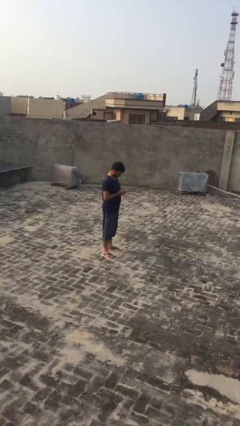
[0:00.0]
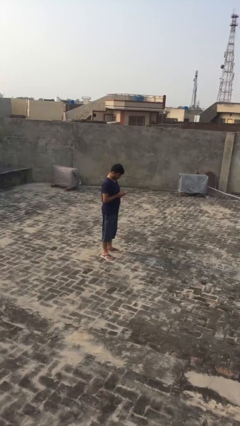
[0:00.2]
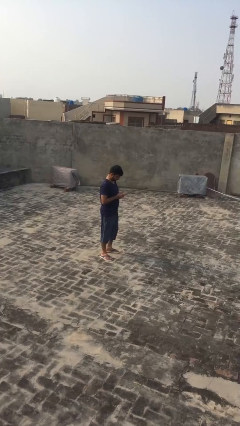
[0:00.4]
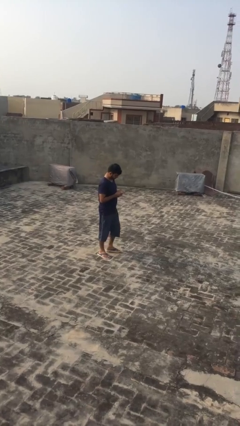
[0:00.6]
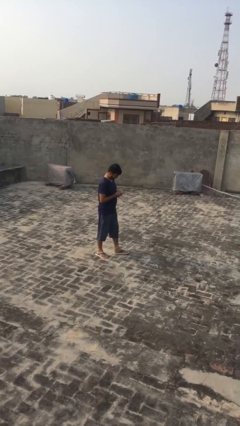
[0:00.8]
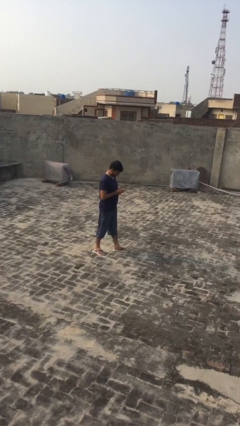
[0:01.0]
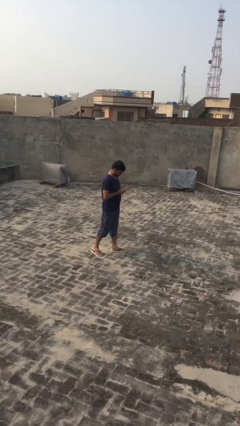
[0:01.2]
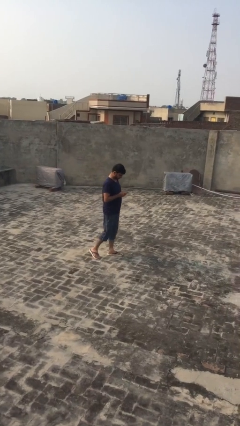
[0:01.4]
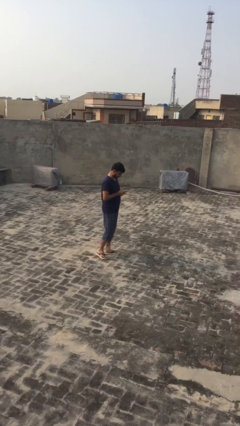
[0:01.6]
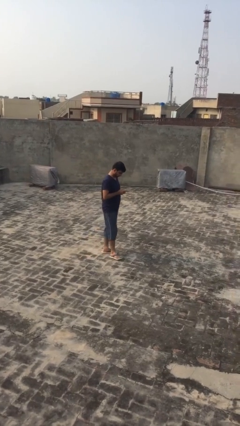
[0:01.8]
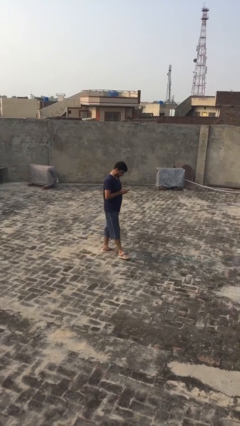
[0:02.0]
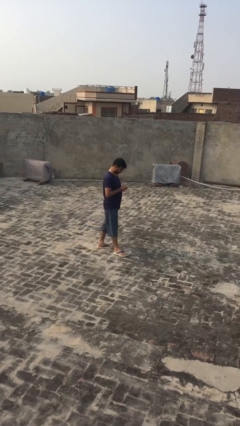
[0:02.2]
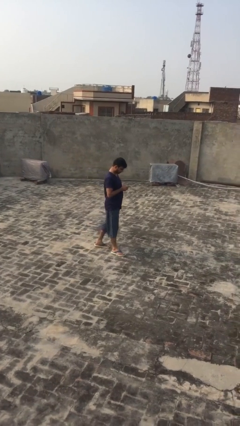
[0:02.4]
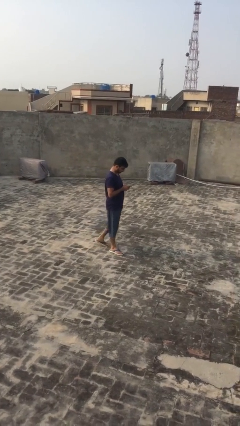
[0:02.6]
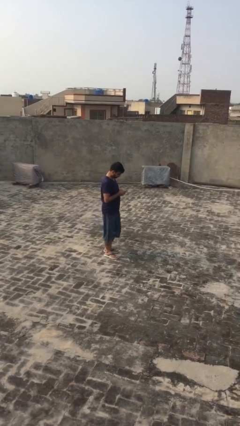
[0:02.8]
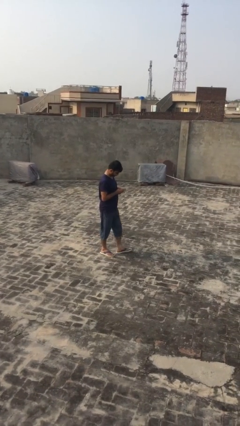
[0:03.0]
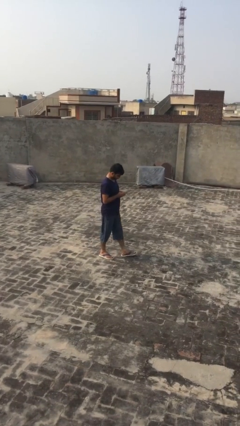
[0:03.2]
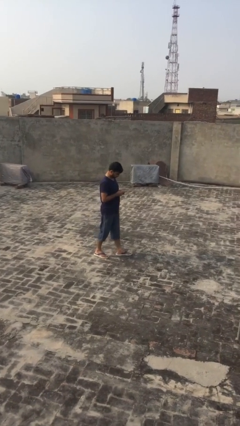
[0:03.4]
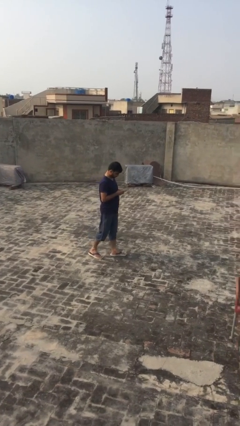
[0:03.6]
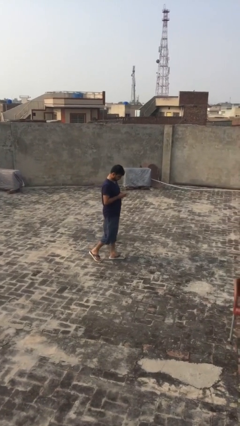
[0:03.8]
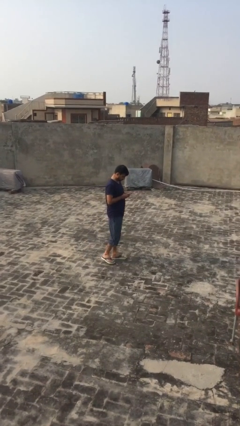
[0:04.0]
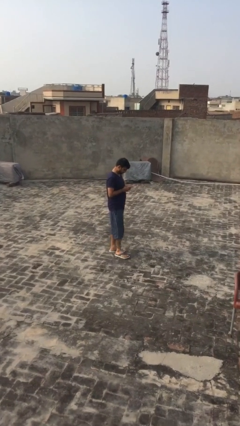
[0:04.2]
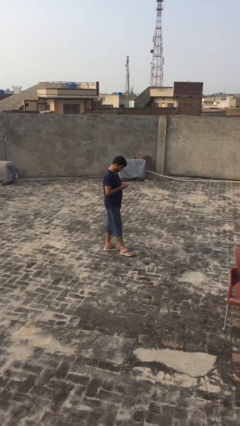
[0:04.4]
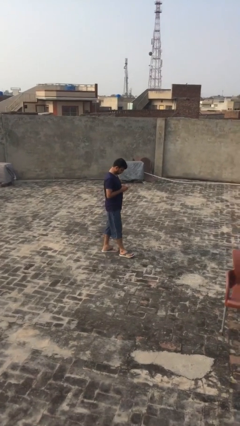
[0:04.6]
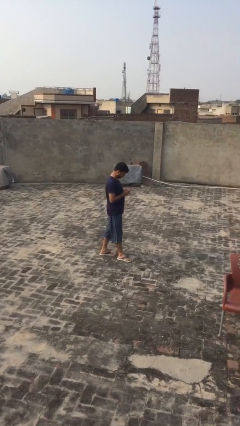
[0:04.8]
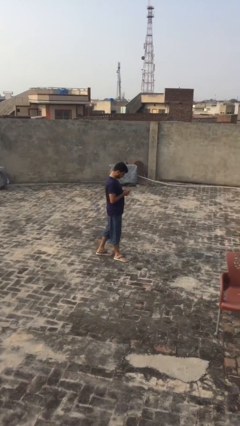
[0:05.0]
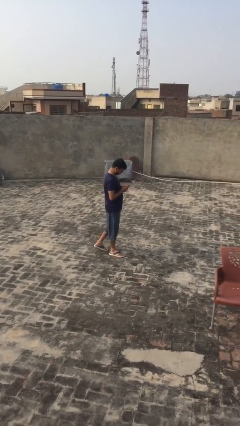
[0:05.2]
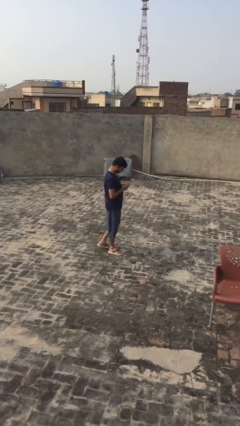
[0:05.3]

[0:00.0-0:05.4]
person texts on phone

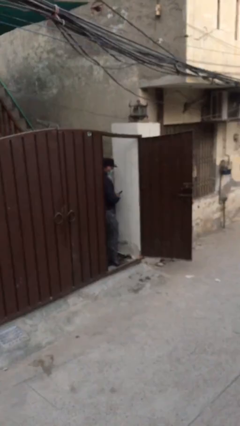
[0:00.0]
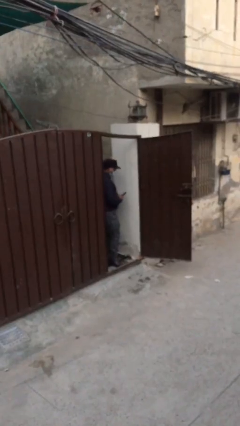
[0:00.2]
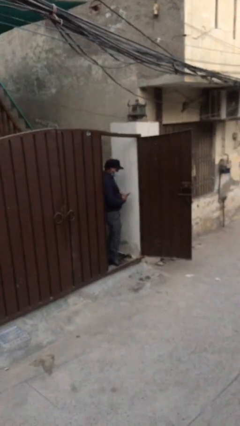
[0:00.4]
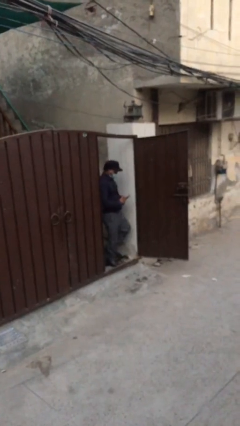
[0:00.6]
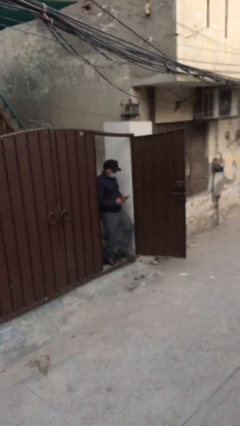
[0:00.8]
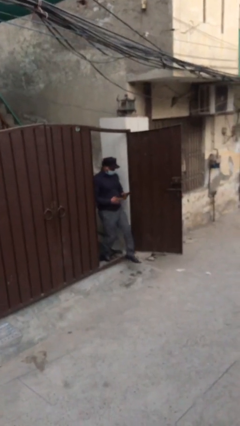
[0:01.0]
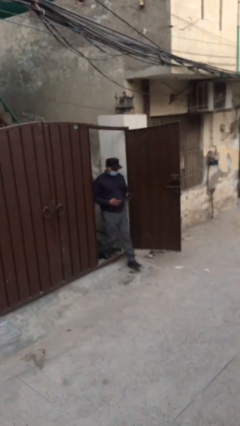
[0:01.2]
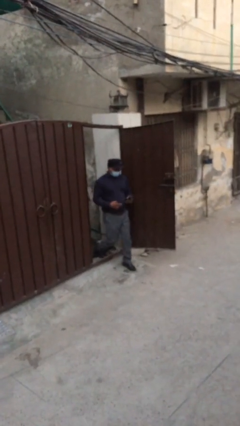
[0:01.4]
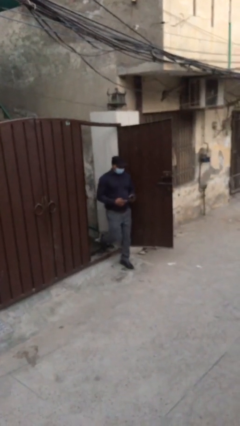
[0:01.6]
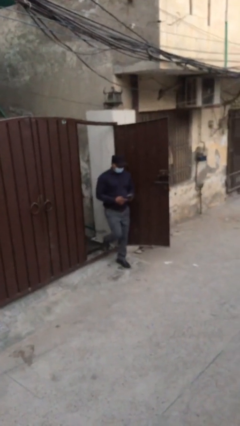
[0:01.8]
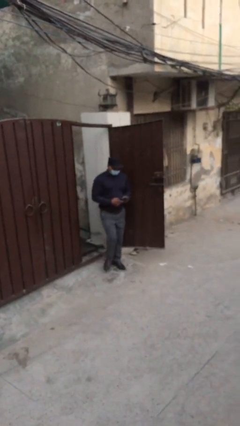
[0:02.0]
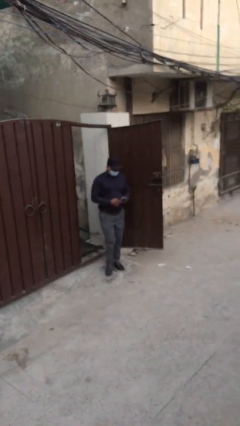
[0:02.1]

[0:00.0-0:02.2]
person enters scene through structure

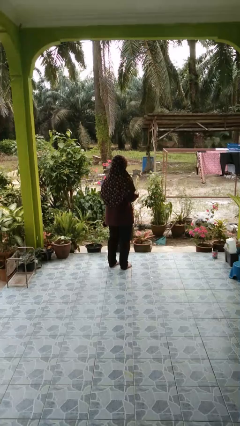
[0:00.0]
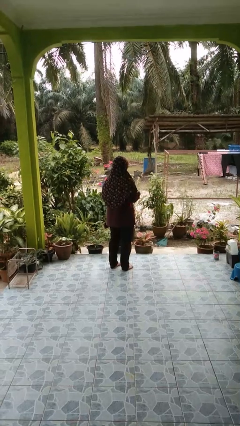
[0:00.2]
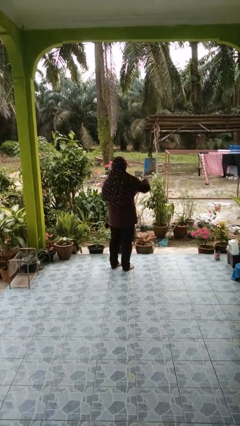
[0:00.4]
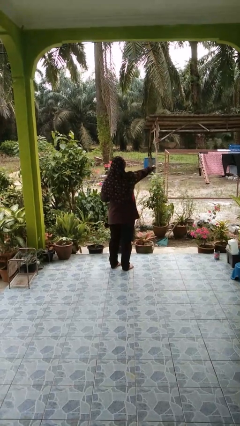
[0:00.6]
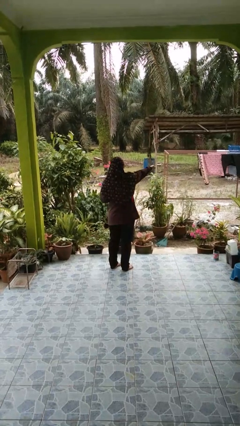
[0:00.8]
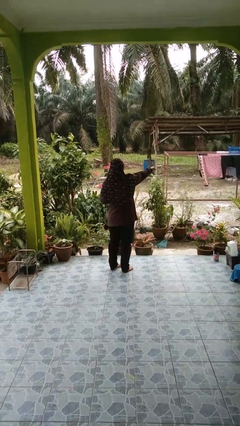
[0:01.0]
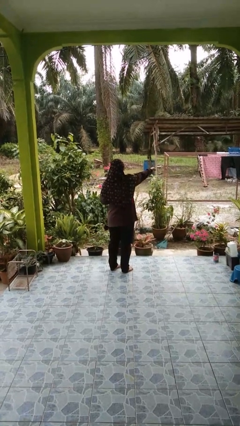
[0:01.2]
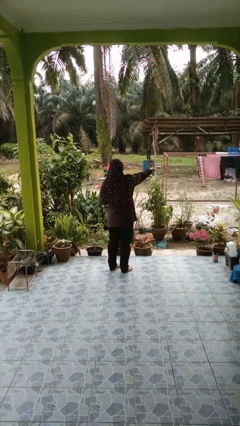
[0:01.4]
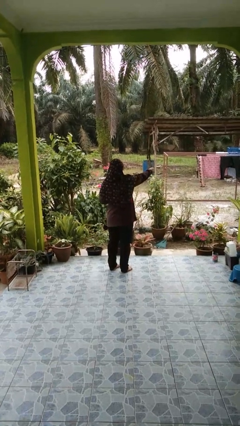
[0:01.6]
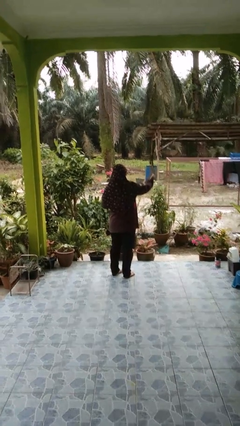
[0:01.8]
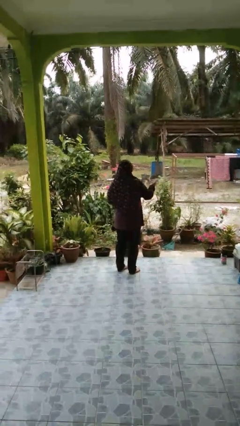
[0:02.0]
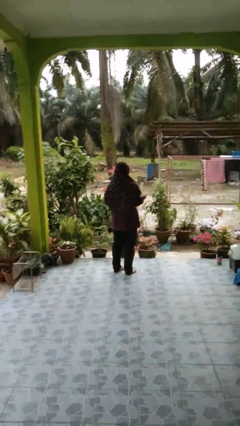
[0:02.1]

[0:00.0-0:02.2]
person punches

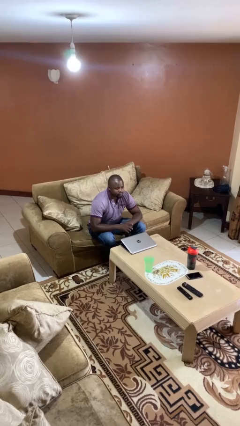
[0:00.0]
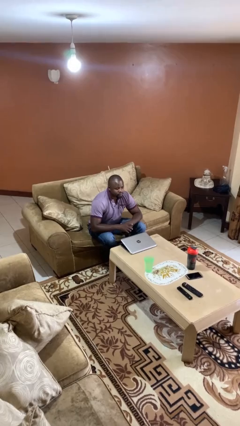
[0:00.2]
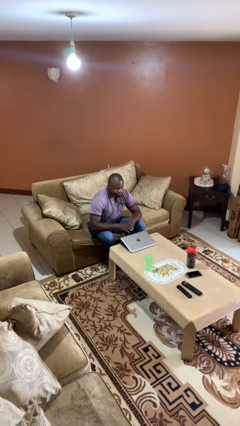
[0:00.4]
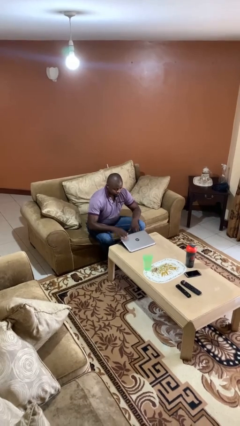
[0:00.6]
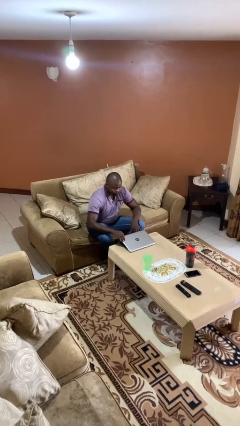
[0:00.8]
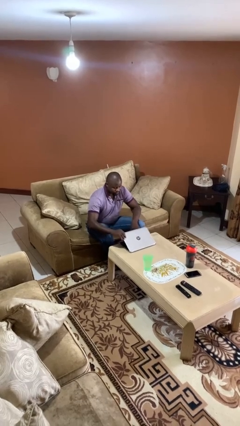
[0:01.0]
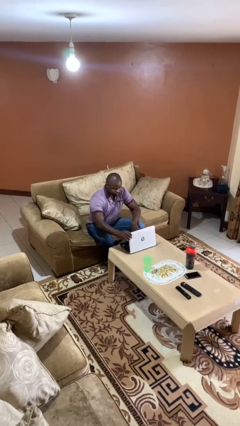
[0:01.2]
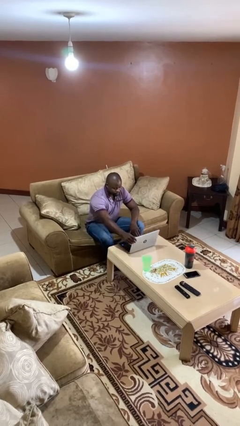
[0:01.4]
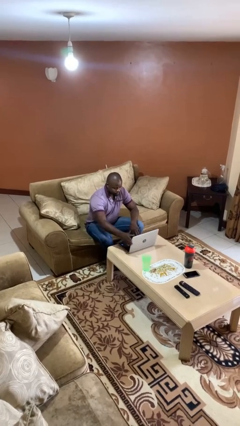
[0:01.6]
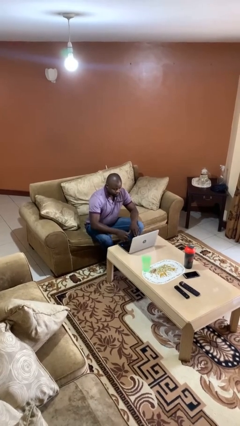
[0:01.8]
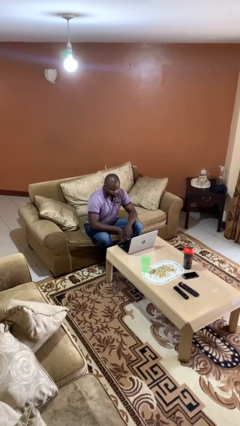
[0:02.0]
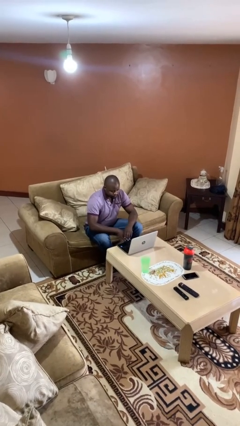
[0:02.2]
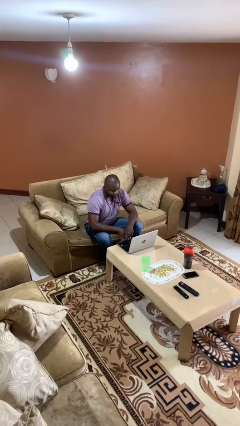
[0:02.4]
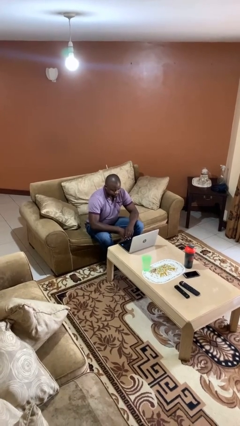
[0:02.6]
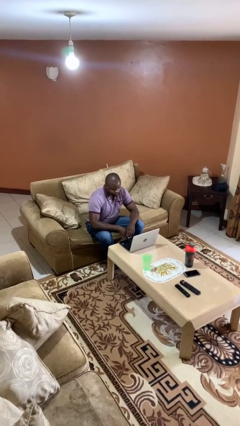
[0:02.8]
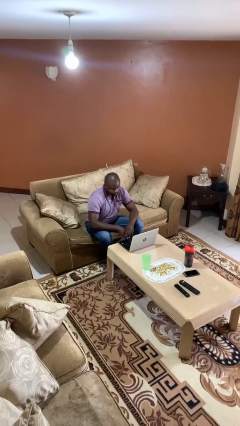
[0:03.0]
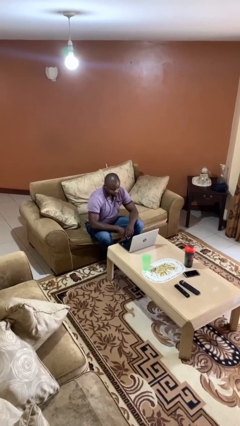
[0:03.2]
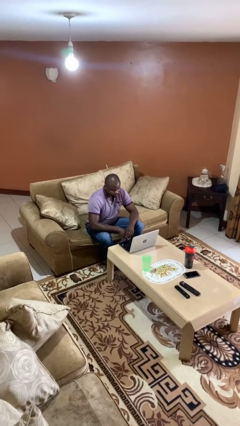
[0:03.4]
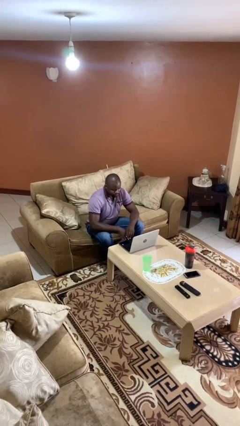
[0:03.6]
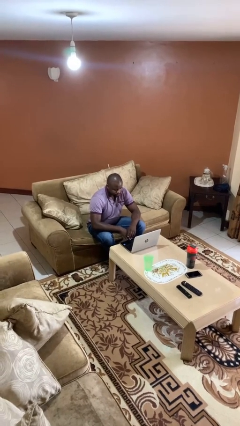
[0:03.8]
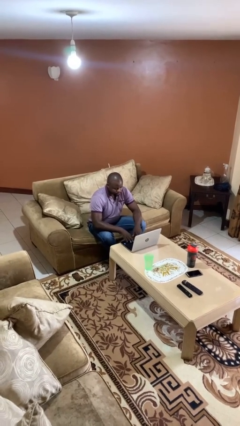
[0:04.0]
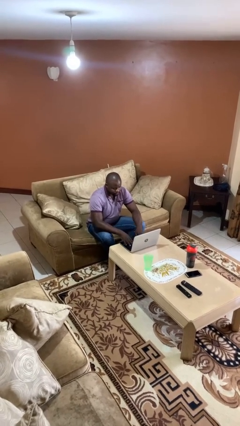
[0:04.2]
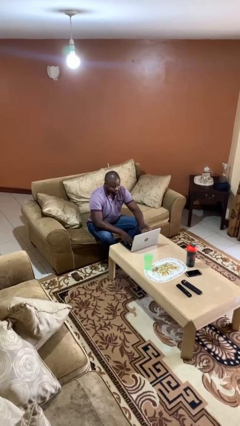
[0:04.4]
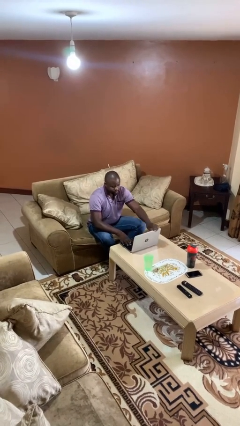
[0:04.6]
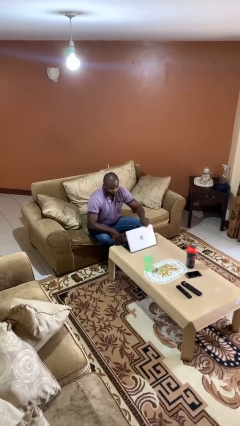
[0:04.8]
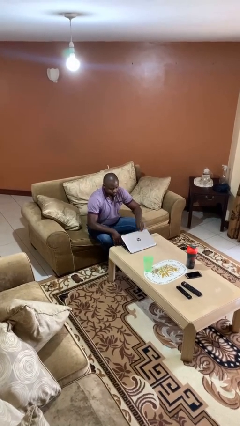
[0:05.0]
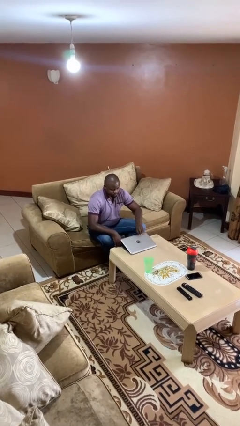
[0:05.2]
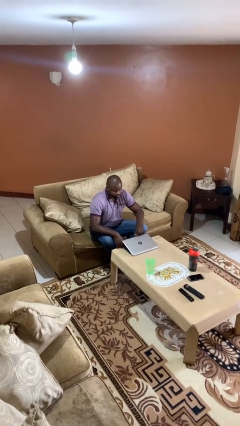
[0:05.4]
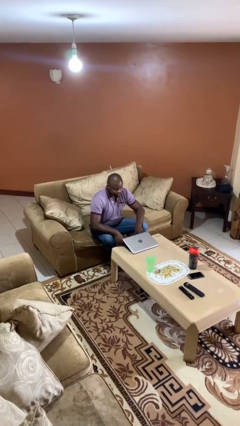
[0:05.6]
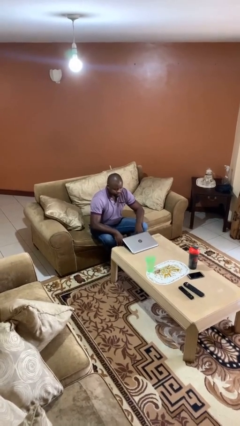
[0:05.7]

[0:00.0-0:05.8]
person interacts with laptop

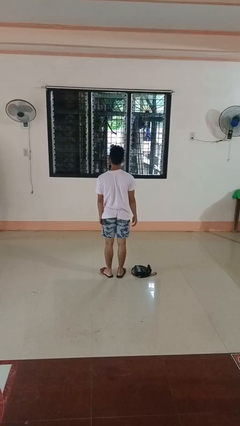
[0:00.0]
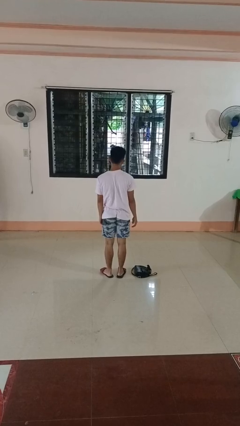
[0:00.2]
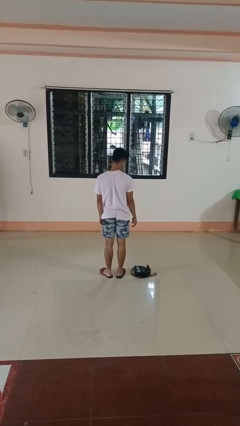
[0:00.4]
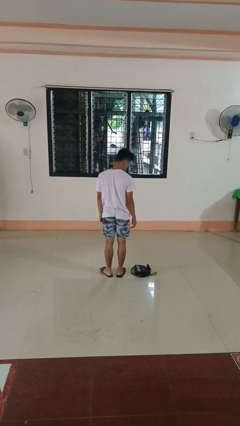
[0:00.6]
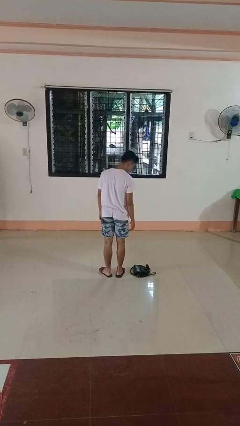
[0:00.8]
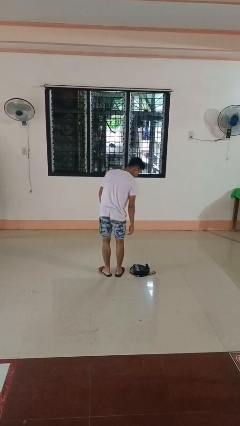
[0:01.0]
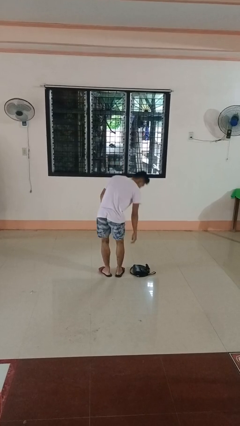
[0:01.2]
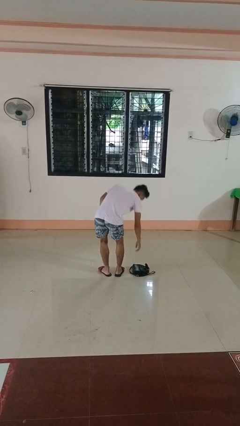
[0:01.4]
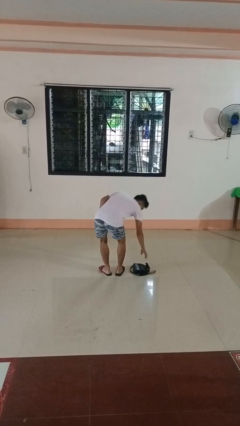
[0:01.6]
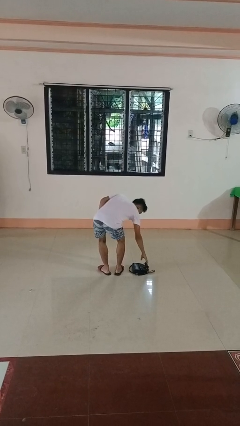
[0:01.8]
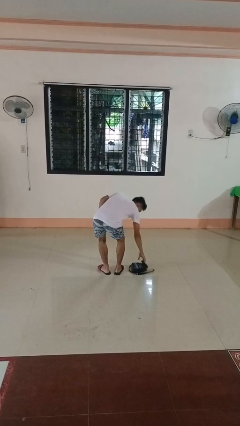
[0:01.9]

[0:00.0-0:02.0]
person drops object
